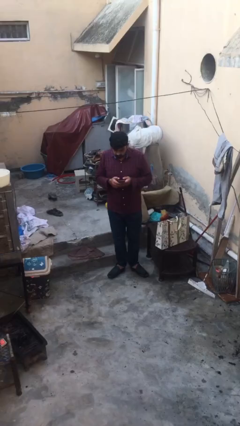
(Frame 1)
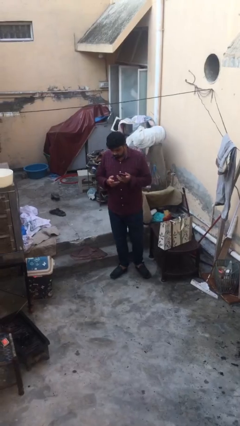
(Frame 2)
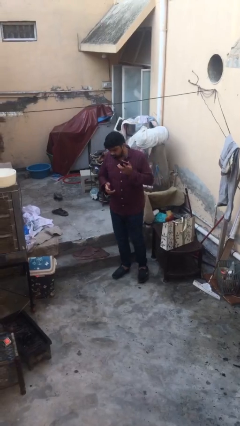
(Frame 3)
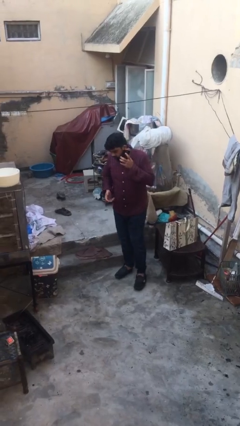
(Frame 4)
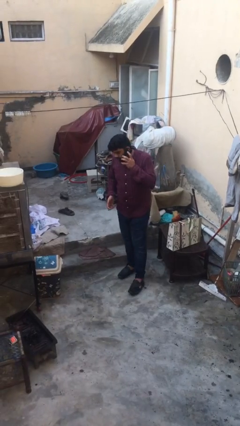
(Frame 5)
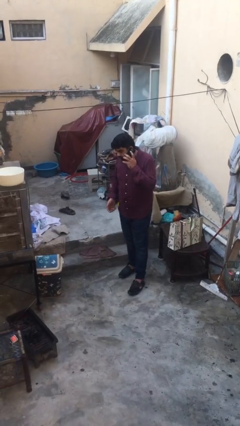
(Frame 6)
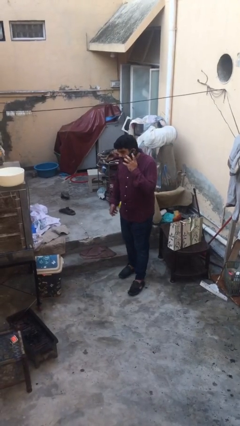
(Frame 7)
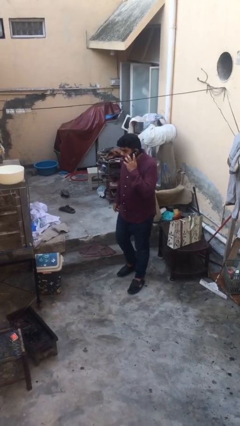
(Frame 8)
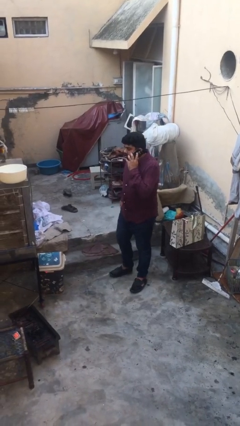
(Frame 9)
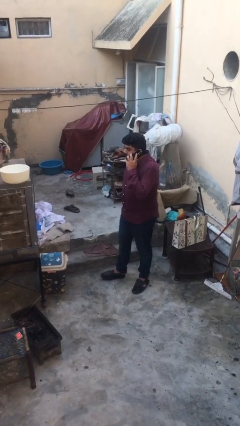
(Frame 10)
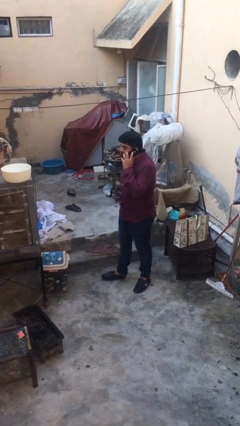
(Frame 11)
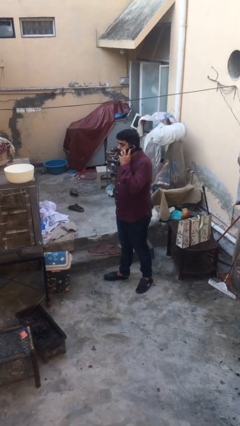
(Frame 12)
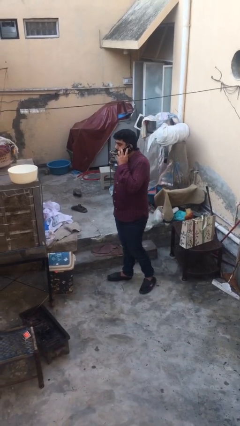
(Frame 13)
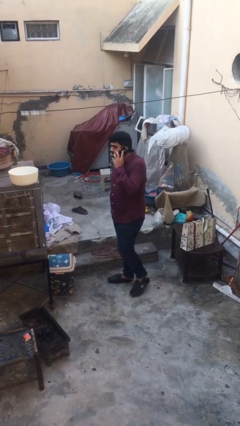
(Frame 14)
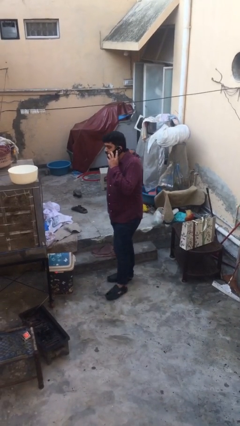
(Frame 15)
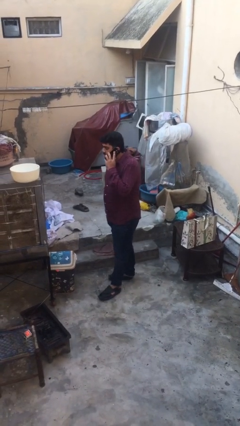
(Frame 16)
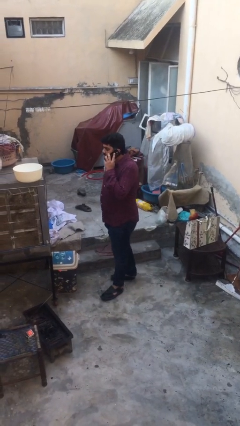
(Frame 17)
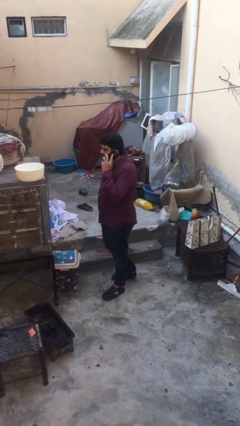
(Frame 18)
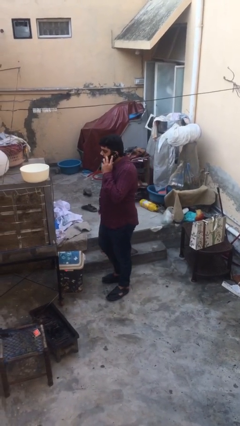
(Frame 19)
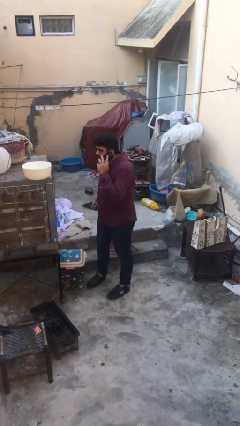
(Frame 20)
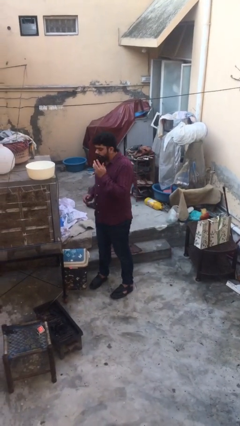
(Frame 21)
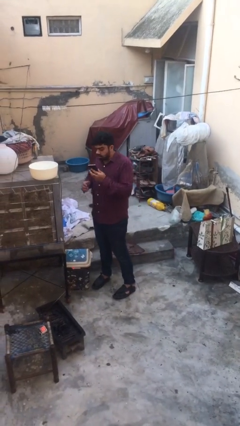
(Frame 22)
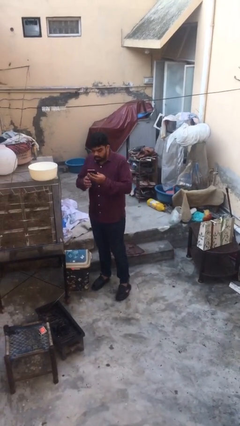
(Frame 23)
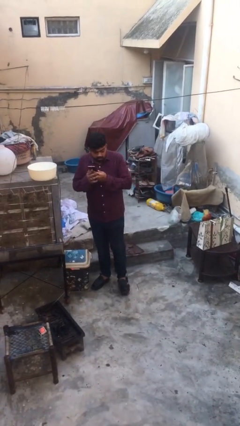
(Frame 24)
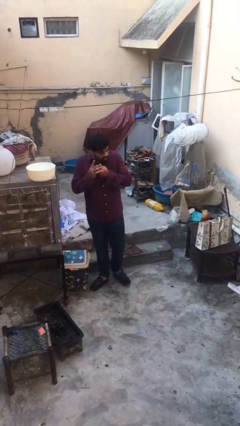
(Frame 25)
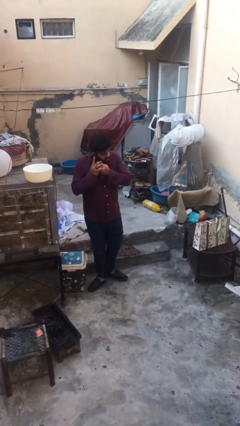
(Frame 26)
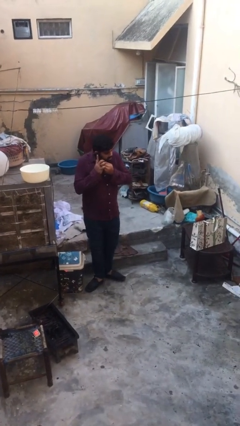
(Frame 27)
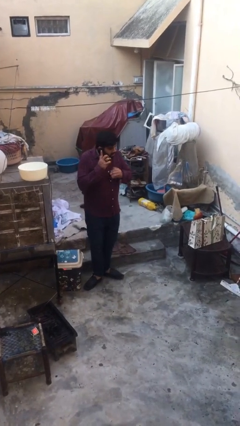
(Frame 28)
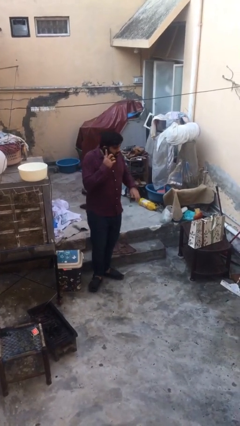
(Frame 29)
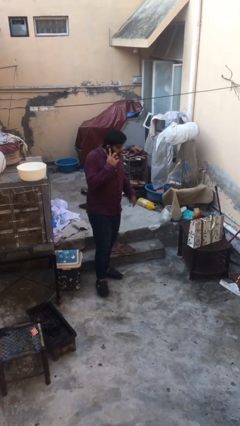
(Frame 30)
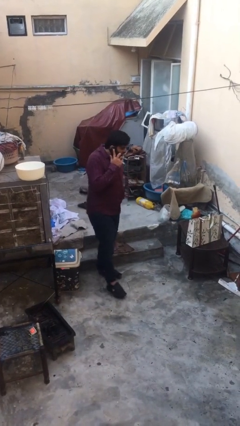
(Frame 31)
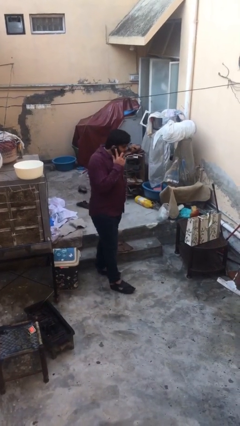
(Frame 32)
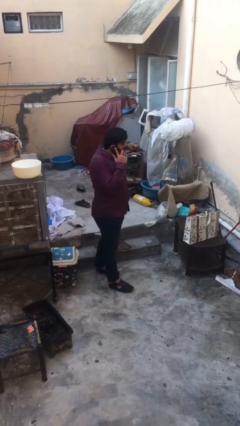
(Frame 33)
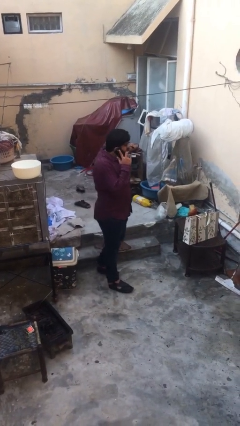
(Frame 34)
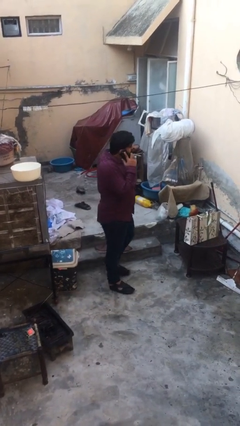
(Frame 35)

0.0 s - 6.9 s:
person talks on phone
